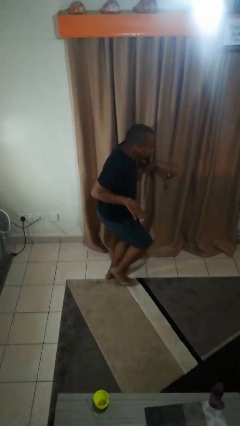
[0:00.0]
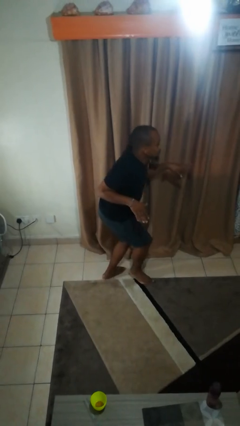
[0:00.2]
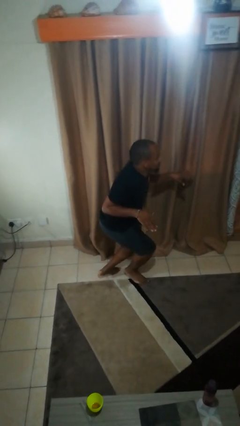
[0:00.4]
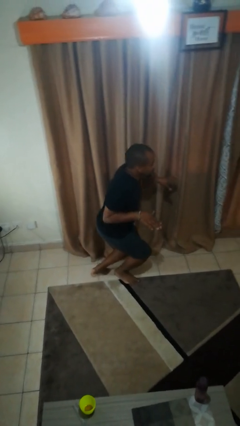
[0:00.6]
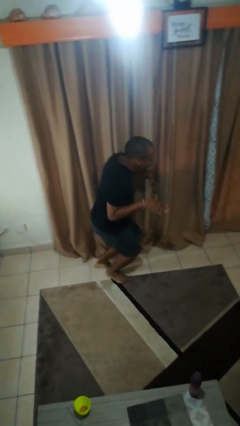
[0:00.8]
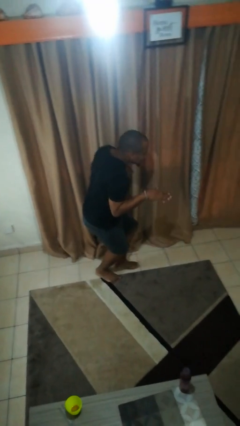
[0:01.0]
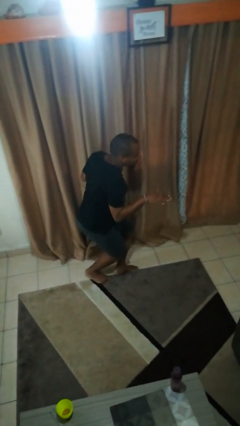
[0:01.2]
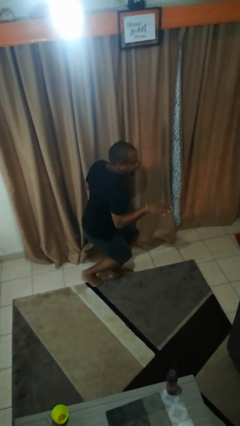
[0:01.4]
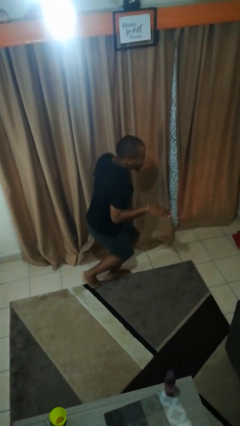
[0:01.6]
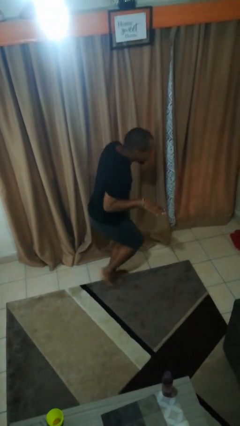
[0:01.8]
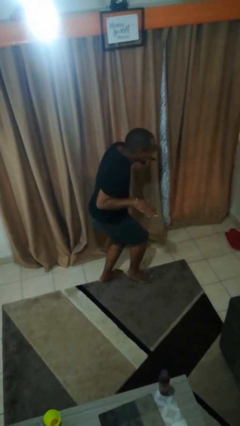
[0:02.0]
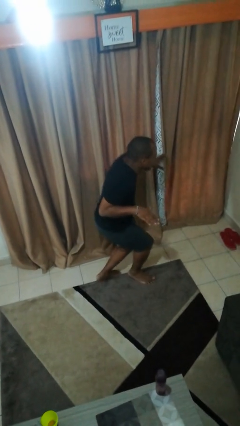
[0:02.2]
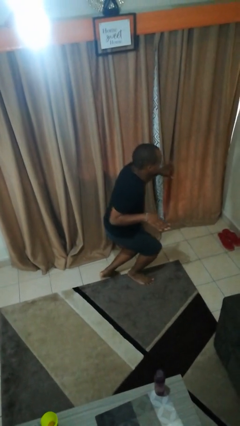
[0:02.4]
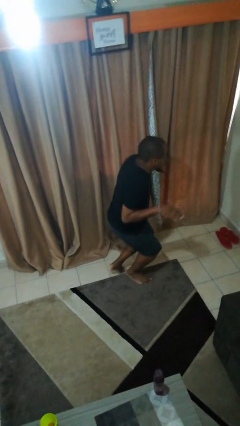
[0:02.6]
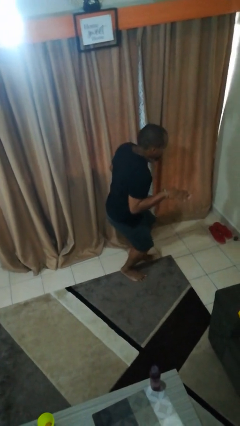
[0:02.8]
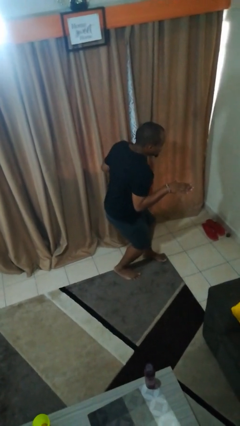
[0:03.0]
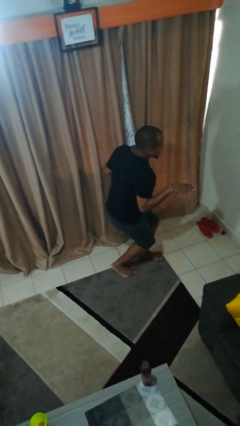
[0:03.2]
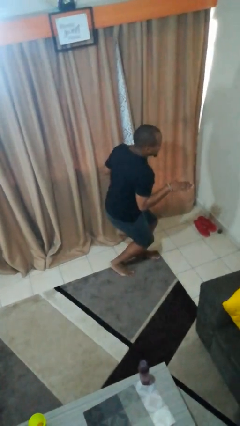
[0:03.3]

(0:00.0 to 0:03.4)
person walks tiptoe

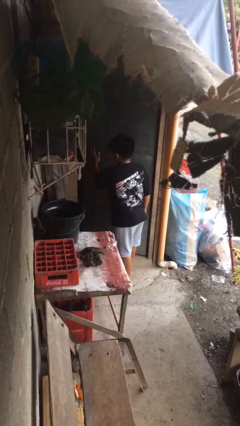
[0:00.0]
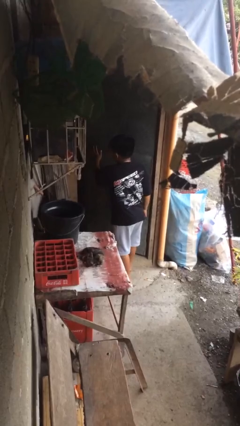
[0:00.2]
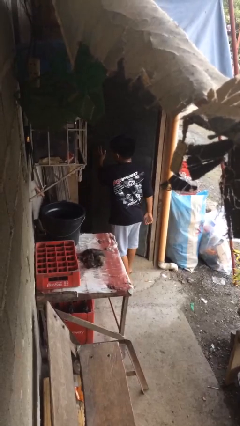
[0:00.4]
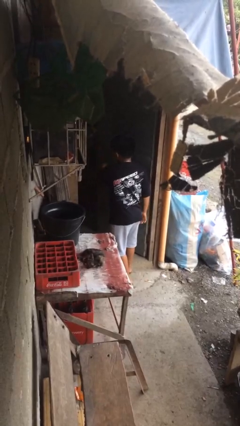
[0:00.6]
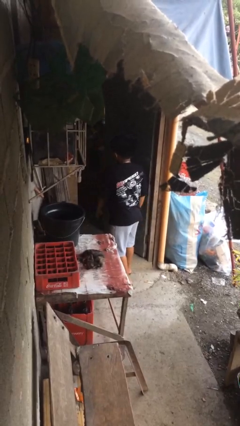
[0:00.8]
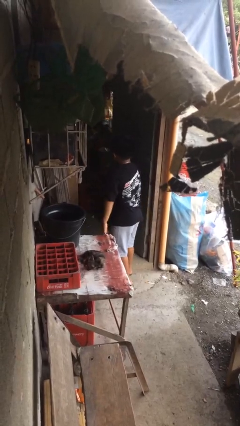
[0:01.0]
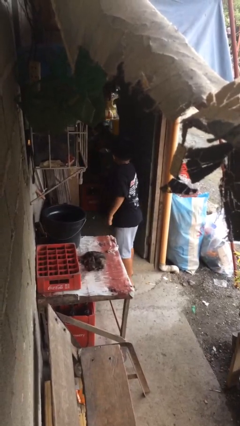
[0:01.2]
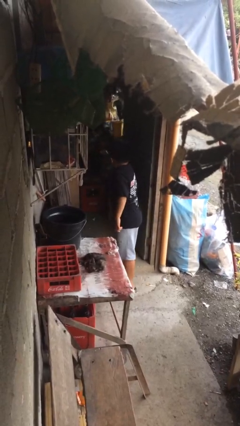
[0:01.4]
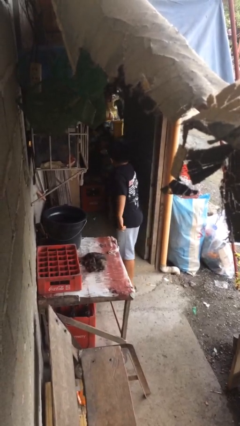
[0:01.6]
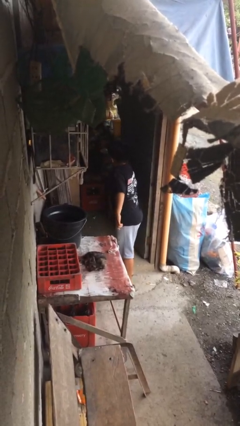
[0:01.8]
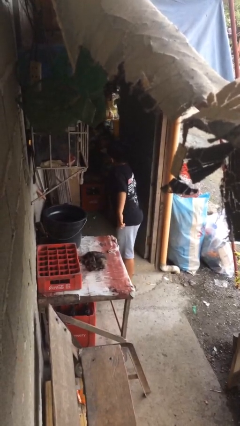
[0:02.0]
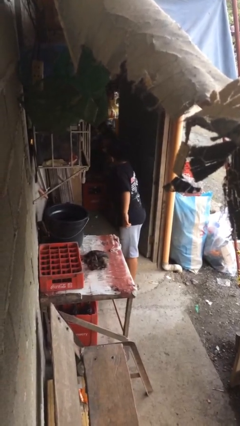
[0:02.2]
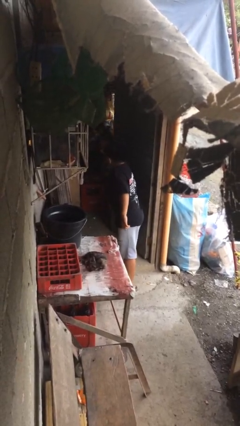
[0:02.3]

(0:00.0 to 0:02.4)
person opens facility door

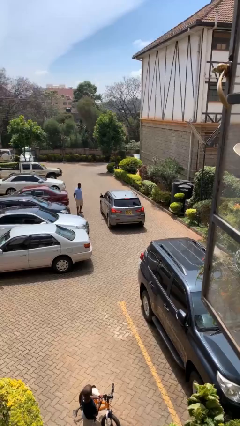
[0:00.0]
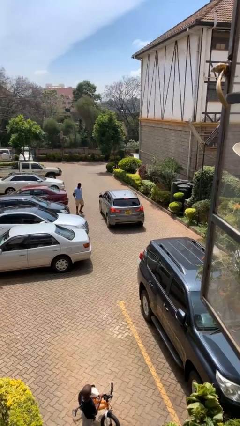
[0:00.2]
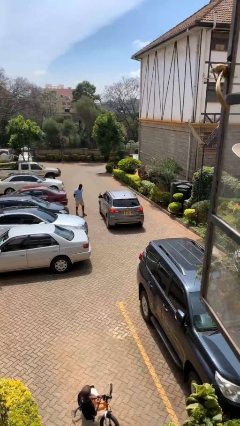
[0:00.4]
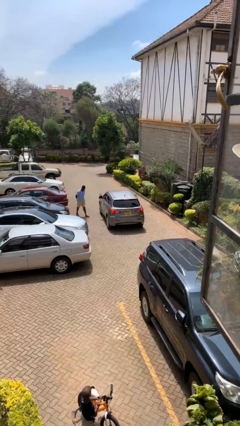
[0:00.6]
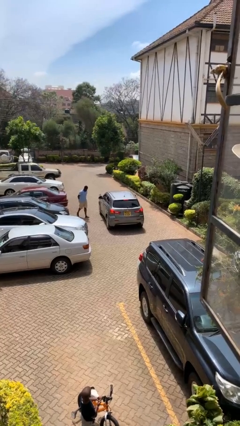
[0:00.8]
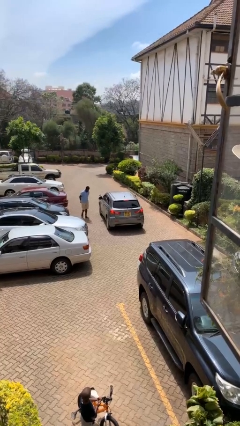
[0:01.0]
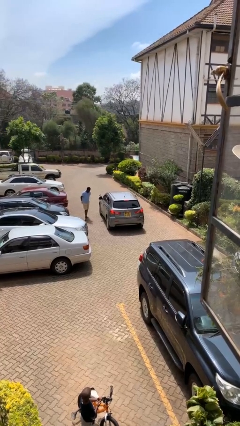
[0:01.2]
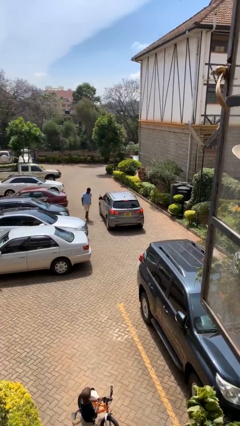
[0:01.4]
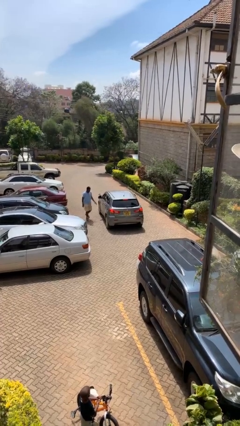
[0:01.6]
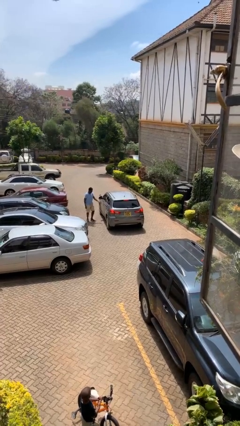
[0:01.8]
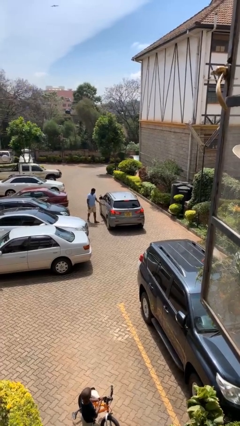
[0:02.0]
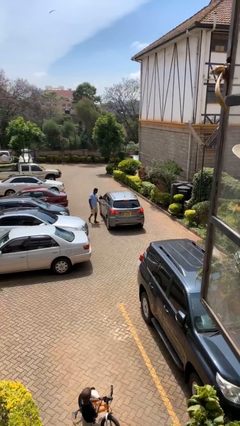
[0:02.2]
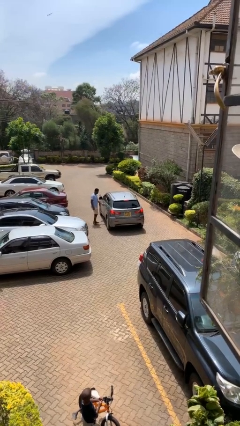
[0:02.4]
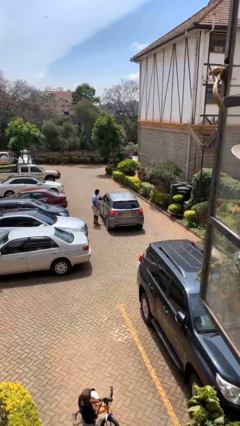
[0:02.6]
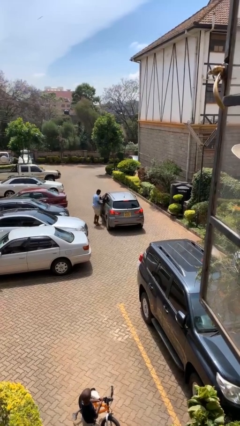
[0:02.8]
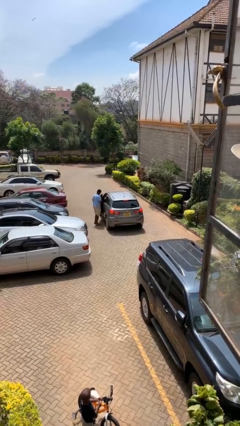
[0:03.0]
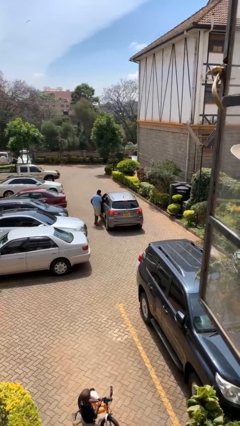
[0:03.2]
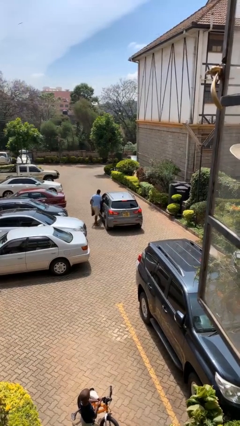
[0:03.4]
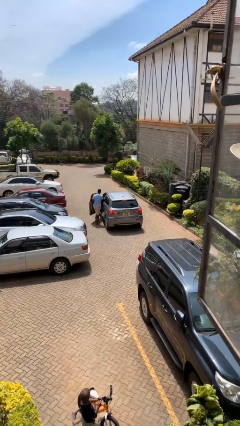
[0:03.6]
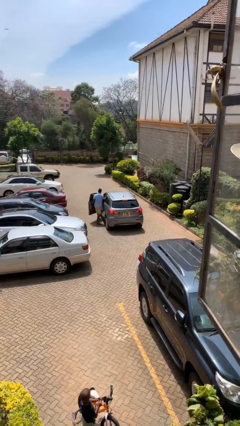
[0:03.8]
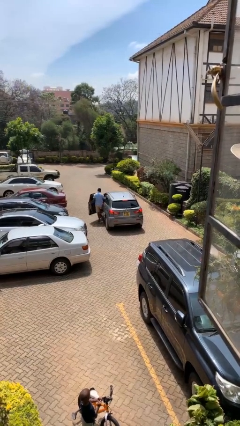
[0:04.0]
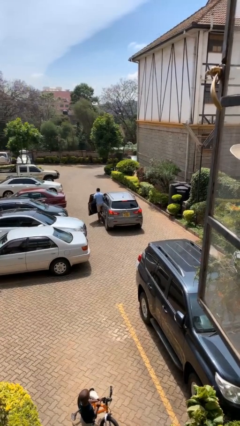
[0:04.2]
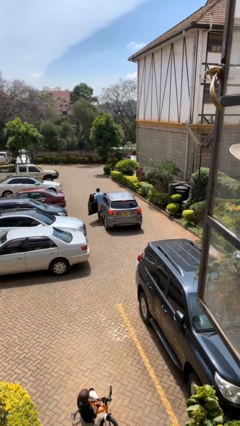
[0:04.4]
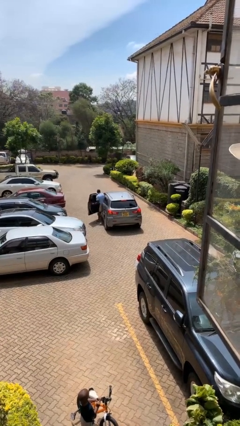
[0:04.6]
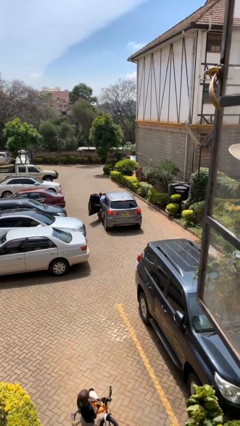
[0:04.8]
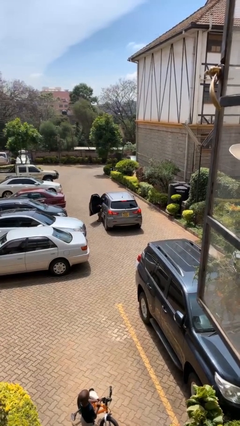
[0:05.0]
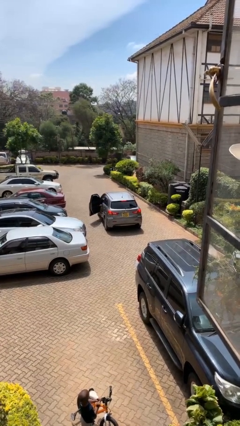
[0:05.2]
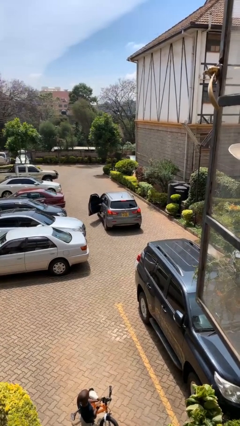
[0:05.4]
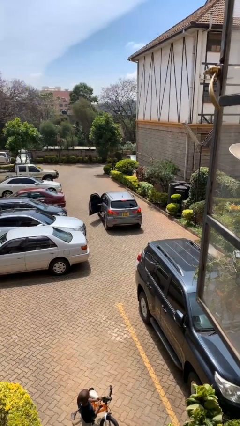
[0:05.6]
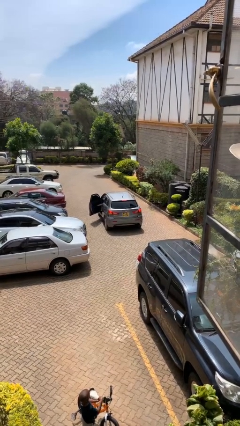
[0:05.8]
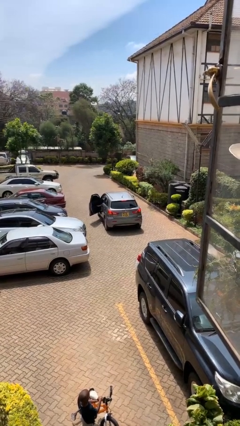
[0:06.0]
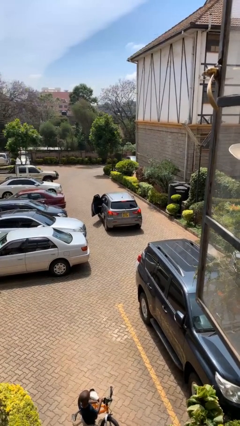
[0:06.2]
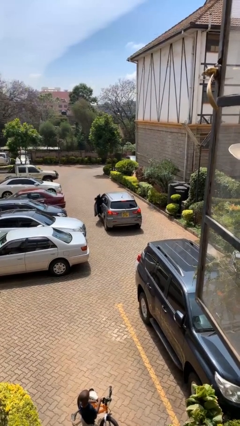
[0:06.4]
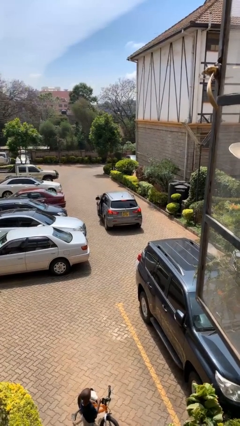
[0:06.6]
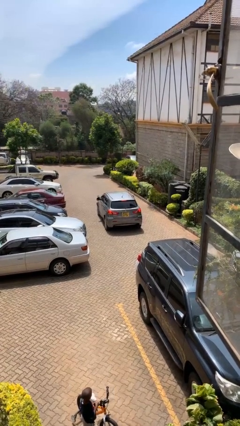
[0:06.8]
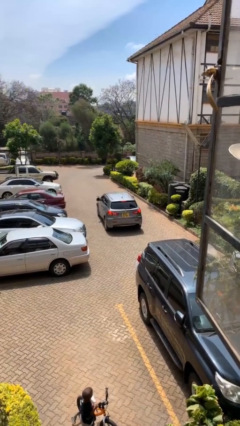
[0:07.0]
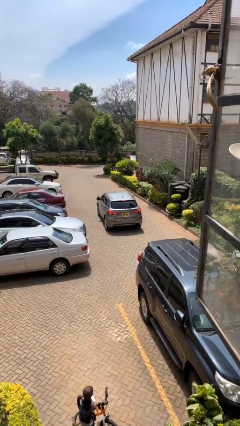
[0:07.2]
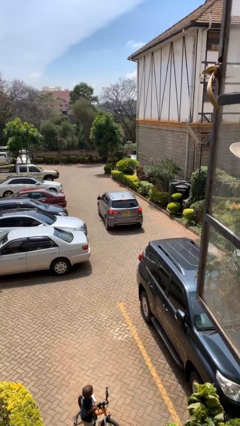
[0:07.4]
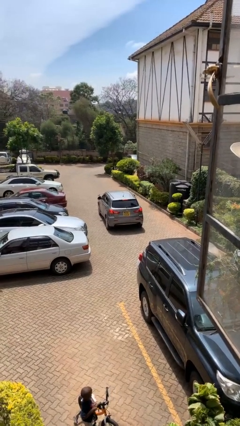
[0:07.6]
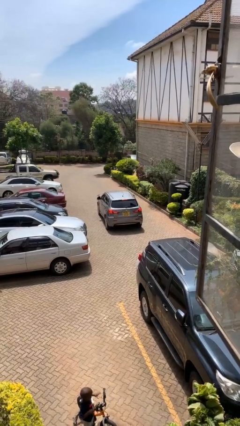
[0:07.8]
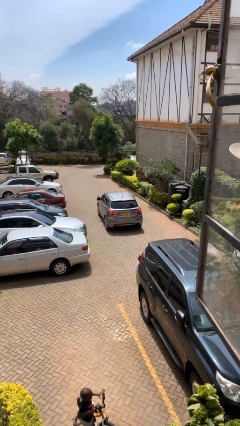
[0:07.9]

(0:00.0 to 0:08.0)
car picks up person

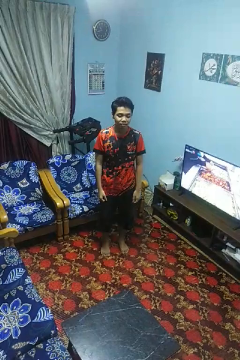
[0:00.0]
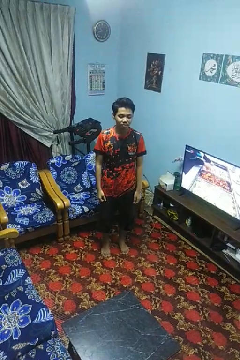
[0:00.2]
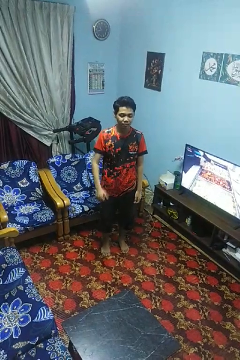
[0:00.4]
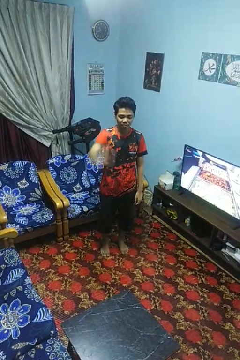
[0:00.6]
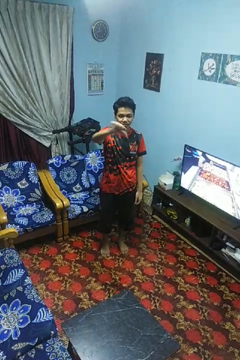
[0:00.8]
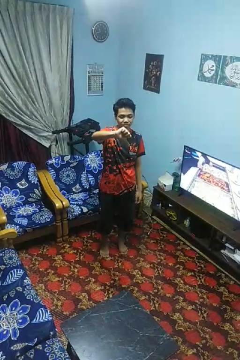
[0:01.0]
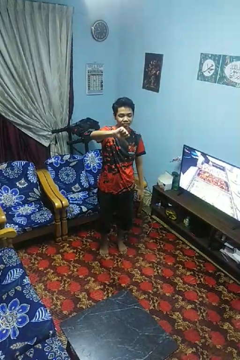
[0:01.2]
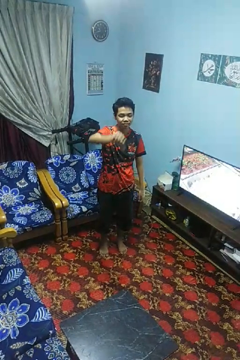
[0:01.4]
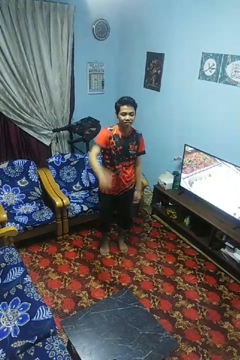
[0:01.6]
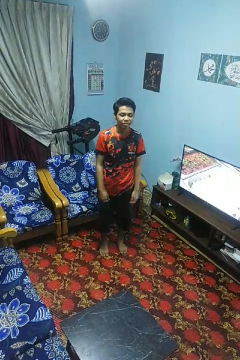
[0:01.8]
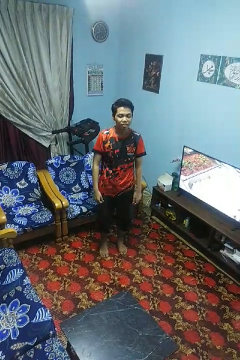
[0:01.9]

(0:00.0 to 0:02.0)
person gestures thumbs down

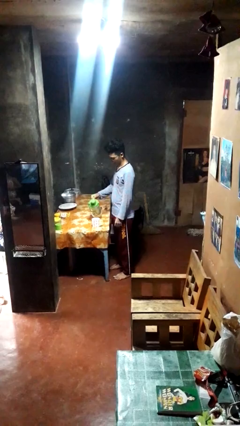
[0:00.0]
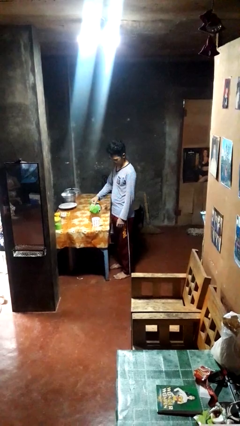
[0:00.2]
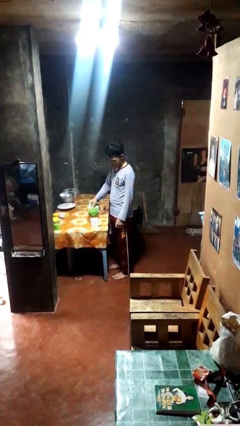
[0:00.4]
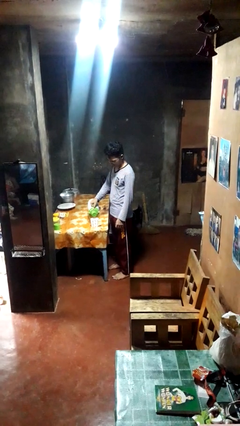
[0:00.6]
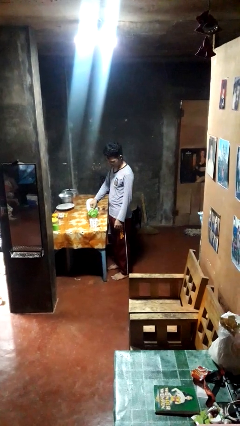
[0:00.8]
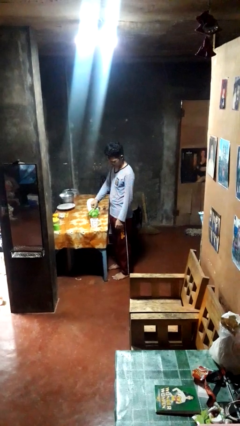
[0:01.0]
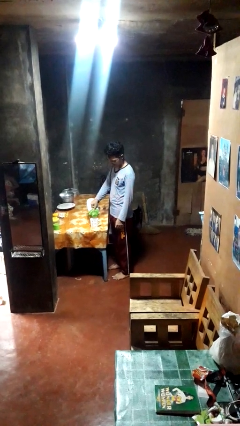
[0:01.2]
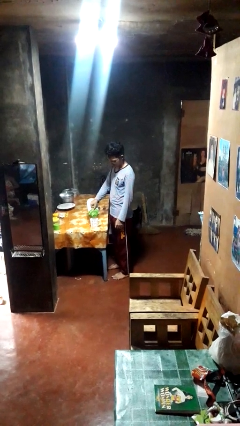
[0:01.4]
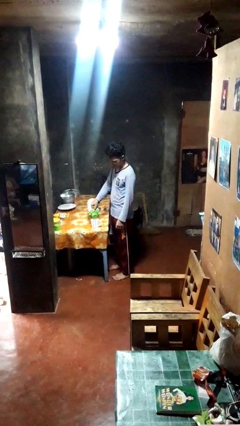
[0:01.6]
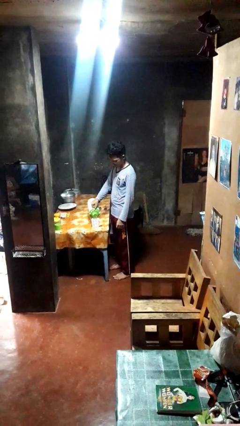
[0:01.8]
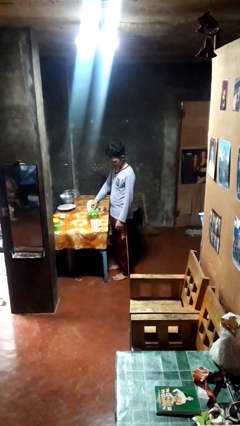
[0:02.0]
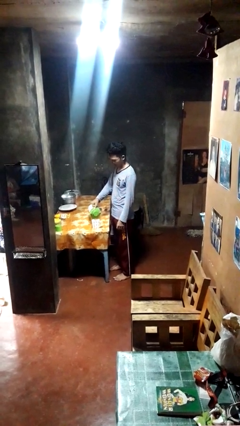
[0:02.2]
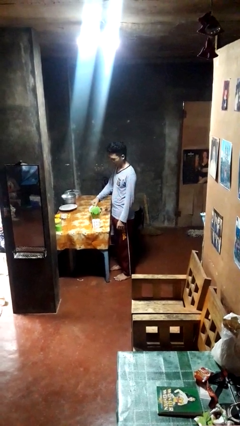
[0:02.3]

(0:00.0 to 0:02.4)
person pours coffee into mug

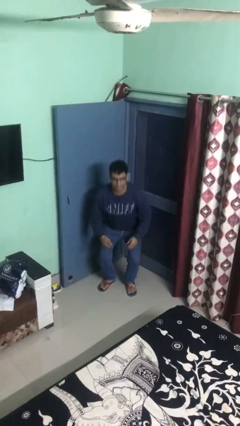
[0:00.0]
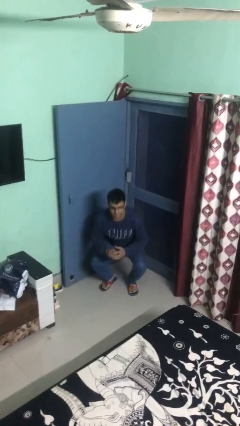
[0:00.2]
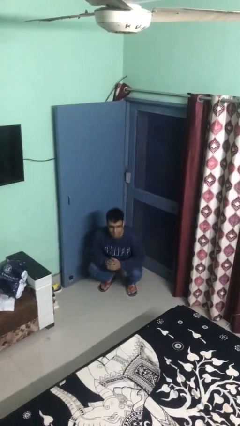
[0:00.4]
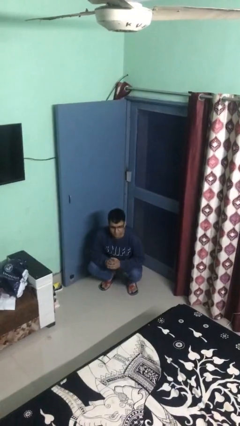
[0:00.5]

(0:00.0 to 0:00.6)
person sits down
